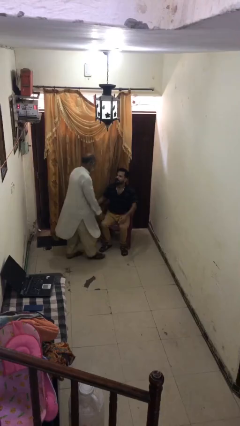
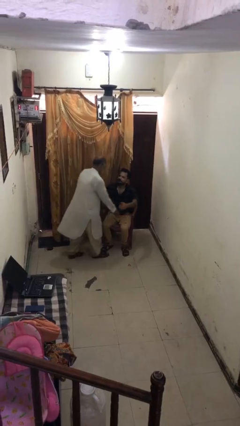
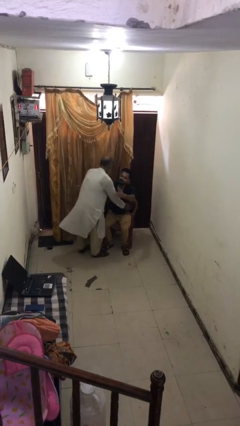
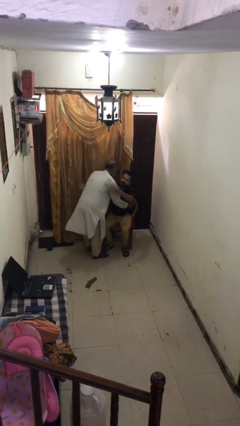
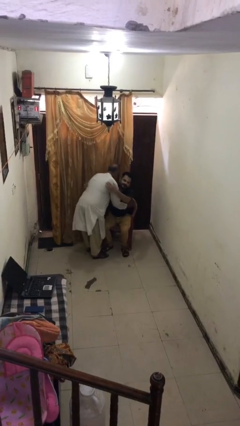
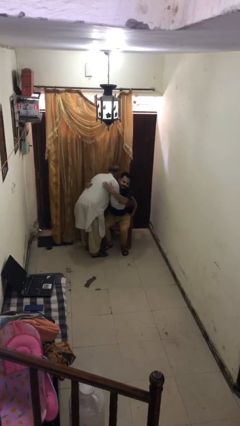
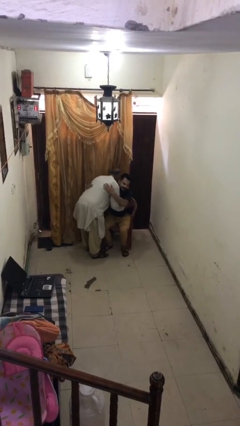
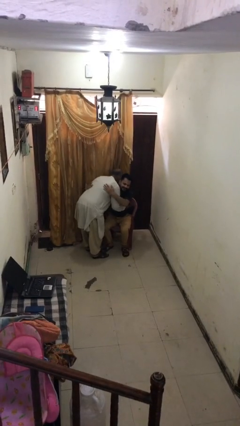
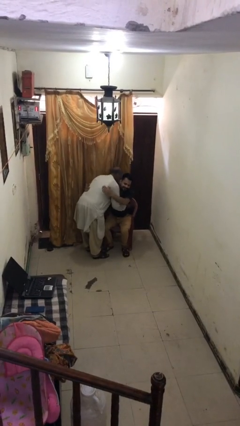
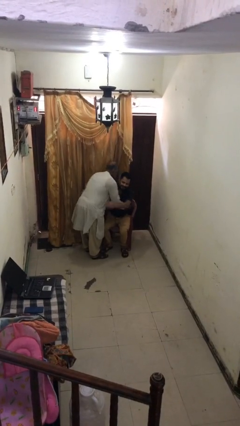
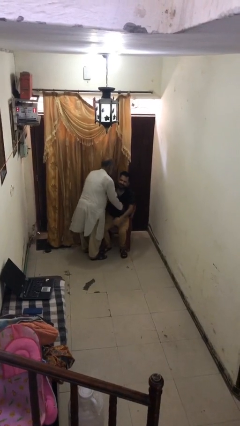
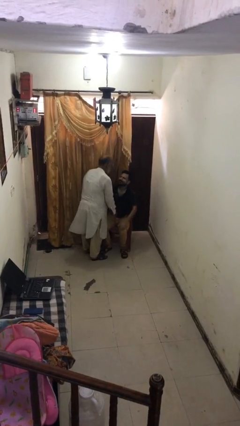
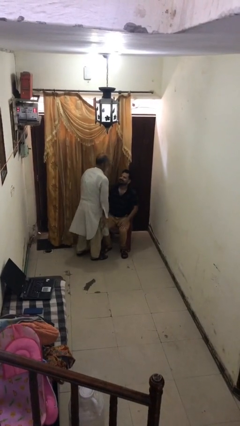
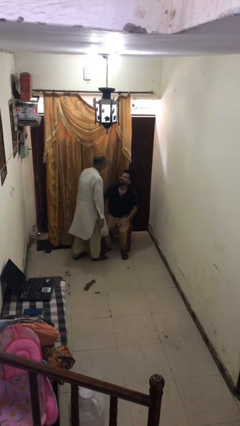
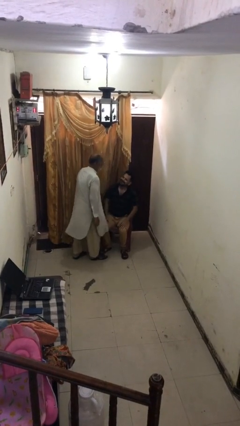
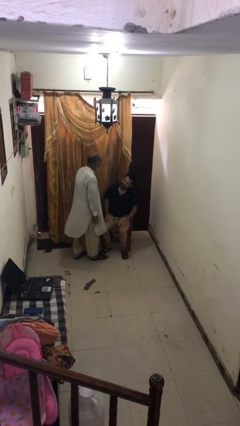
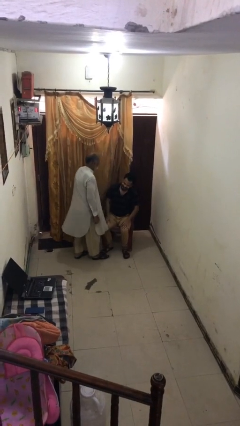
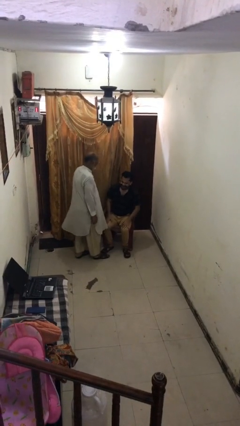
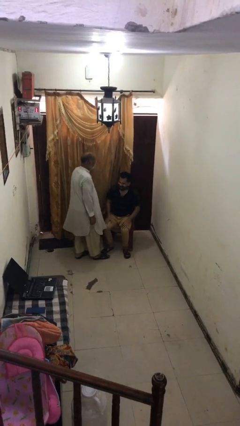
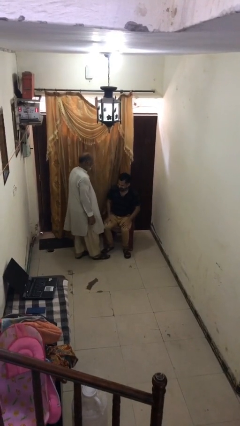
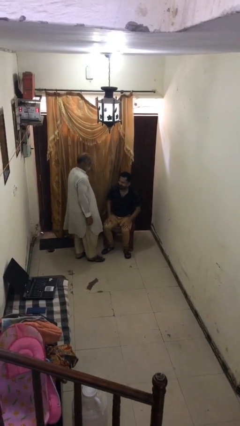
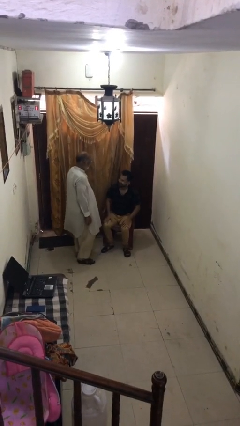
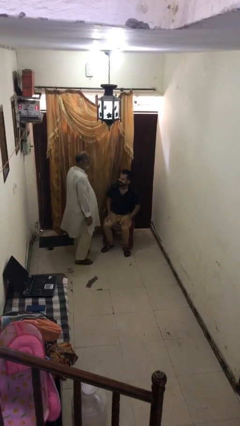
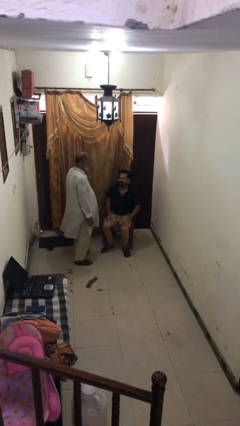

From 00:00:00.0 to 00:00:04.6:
person embraces person

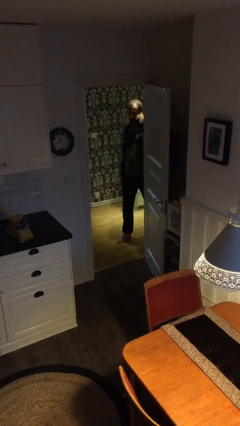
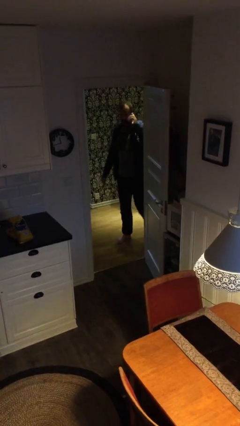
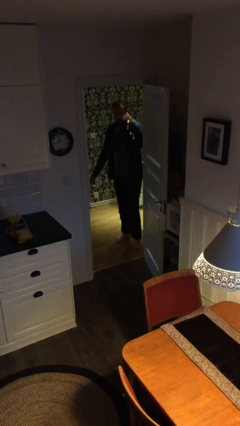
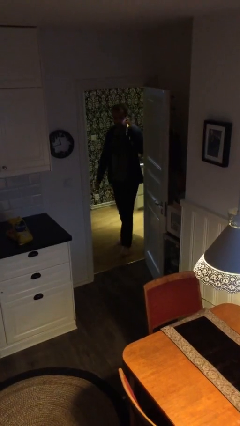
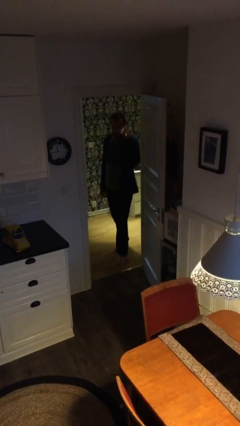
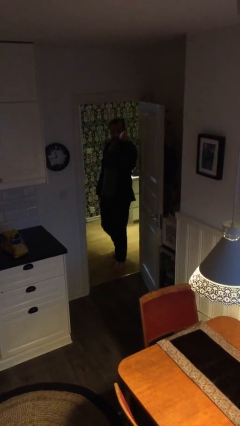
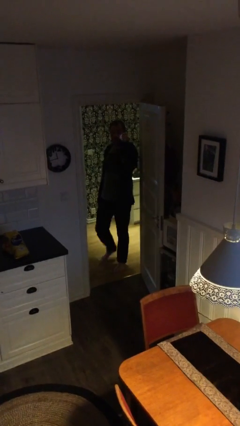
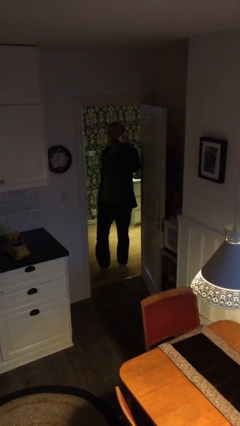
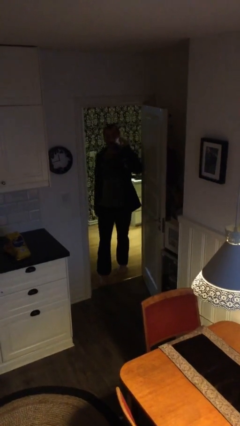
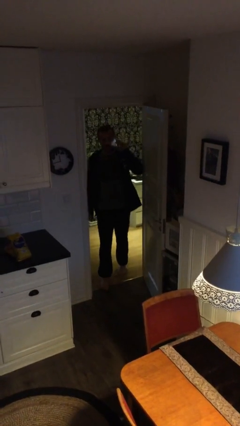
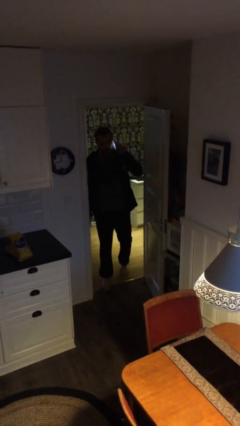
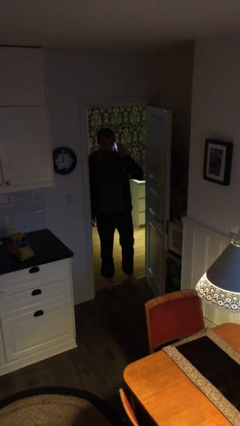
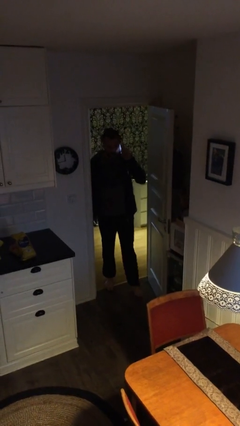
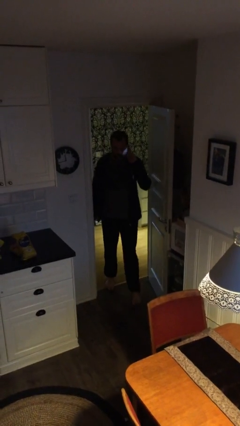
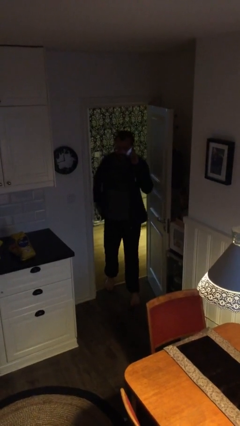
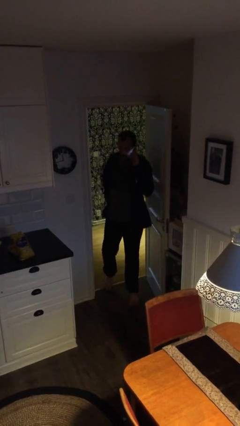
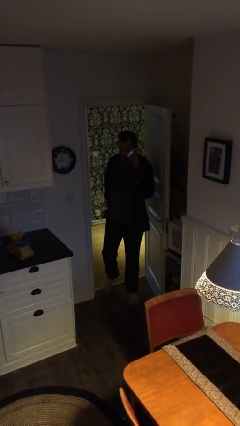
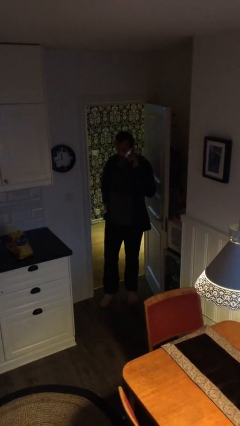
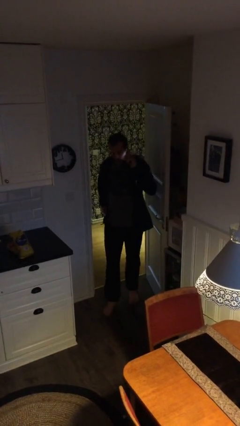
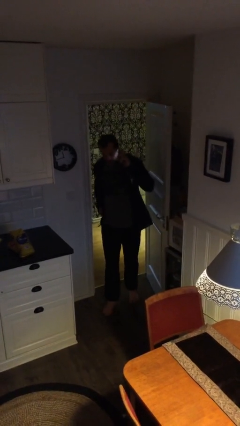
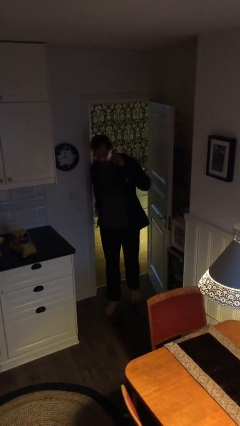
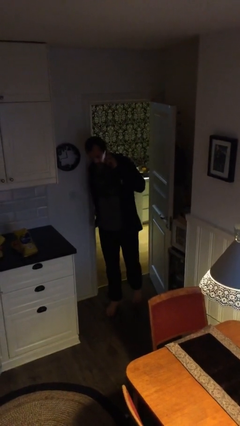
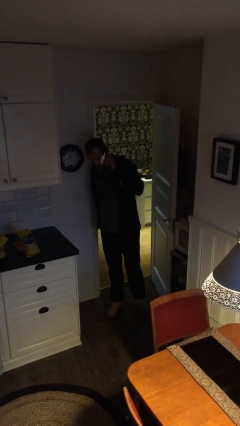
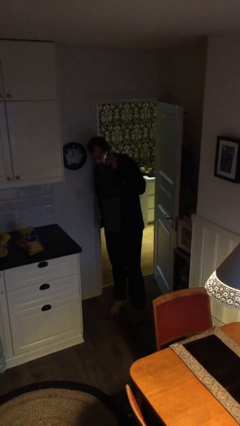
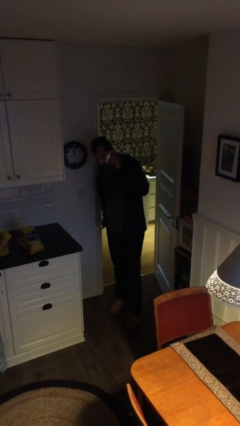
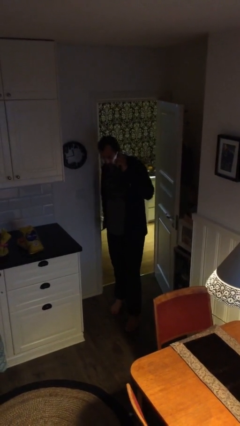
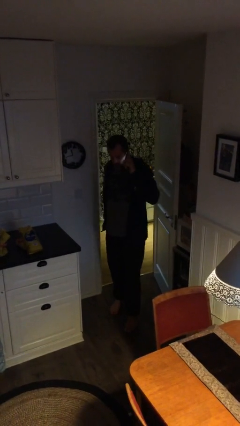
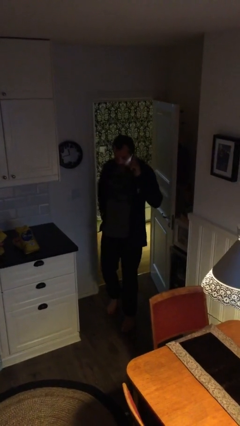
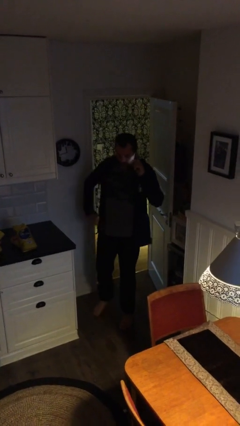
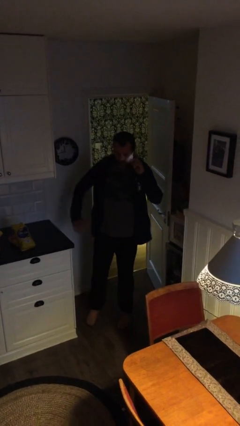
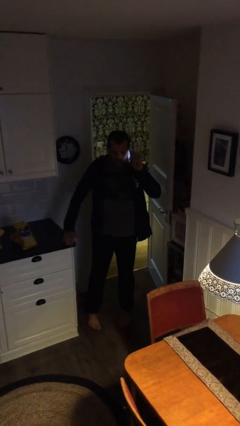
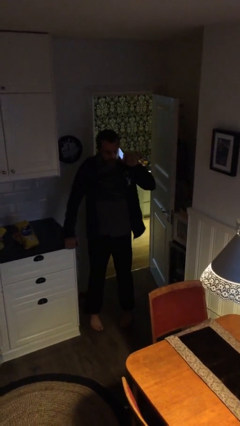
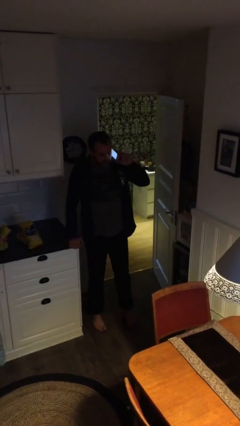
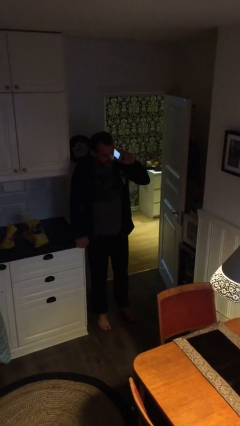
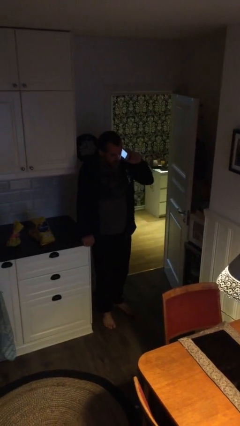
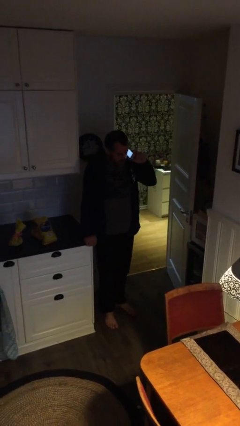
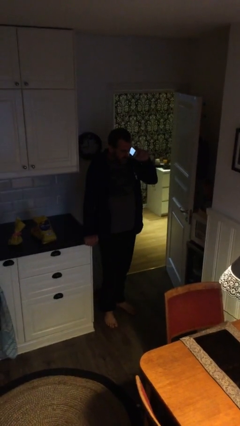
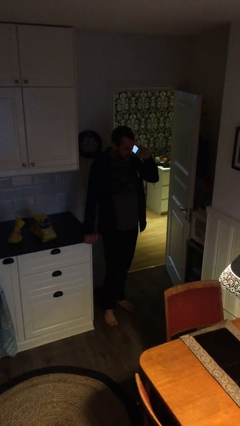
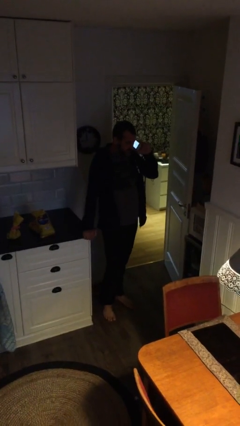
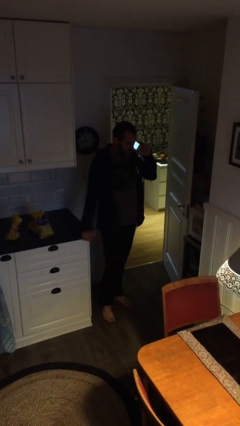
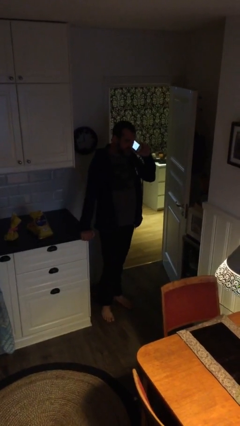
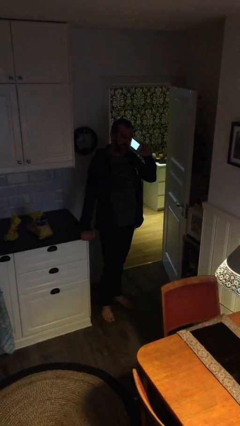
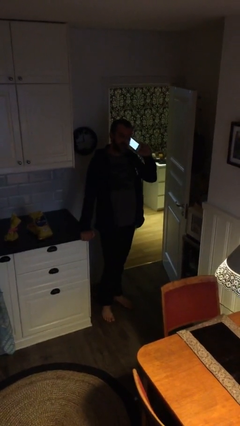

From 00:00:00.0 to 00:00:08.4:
person enters scene through structure

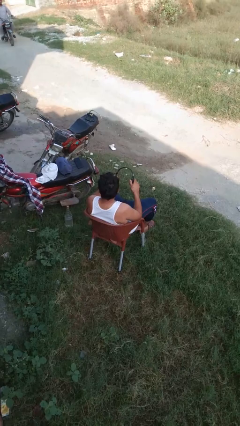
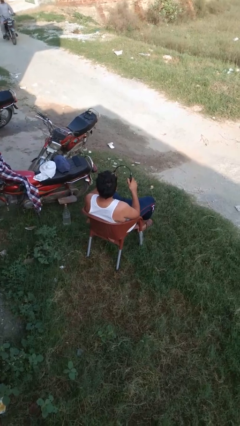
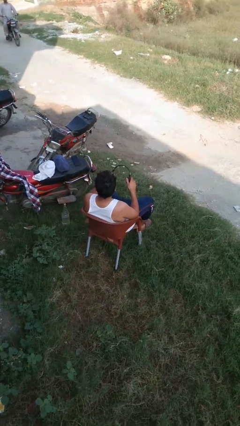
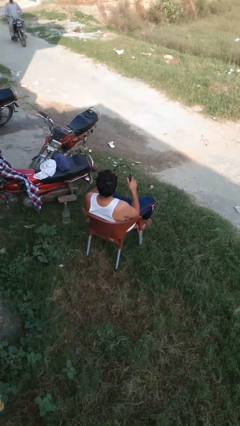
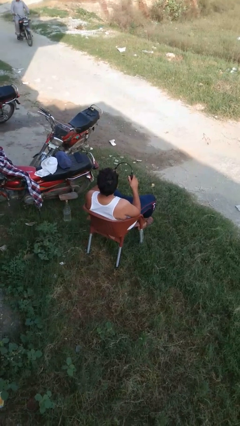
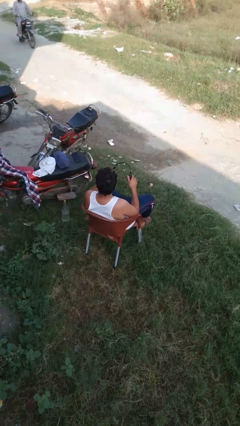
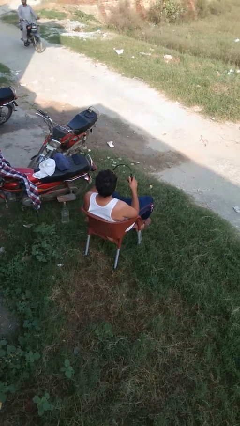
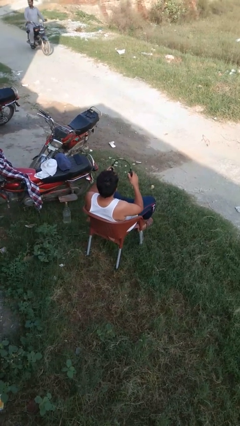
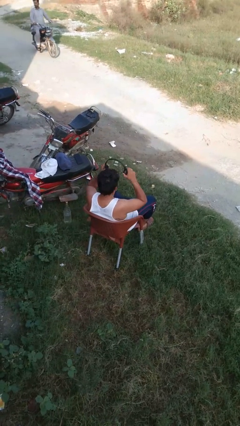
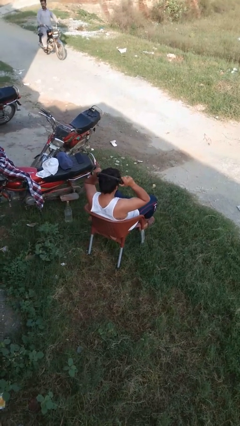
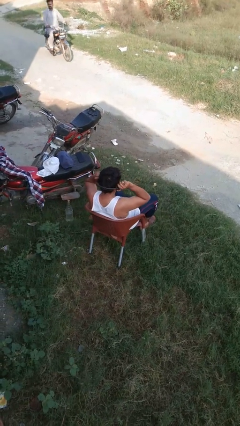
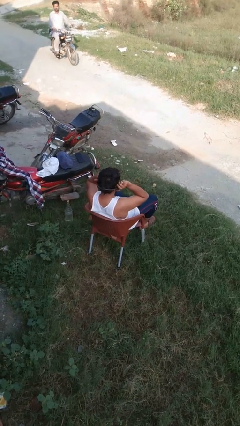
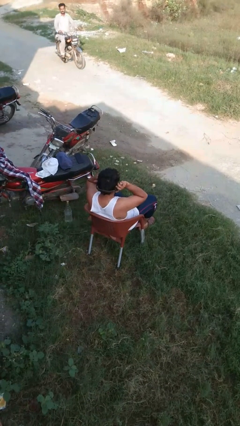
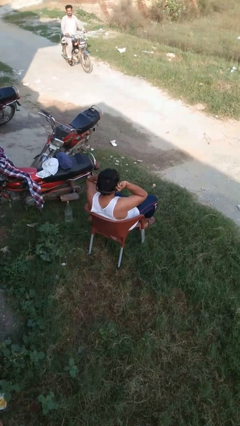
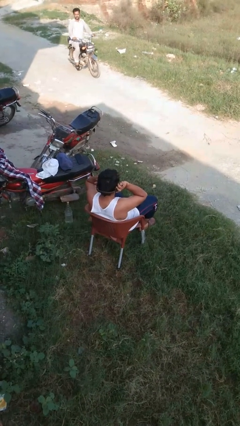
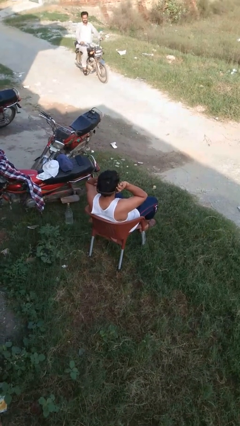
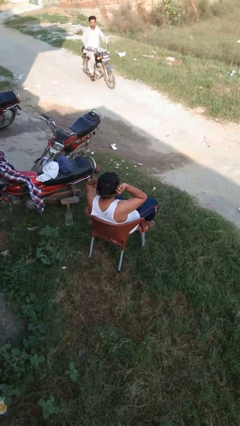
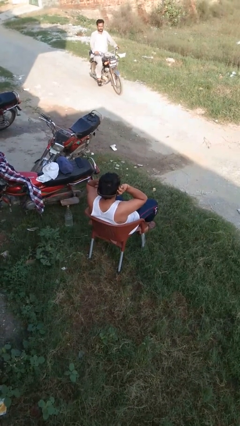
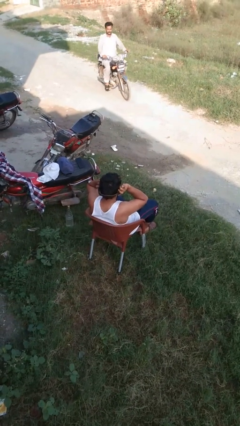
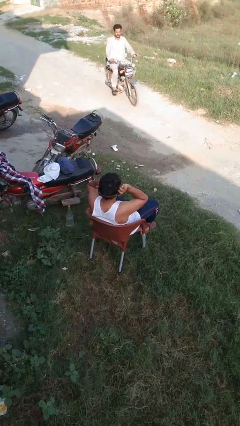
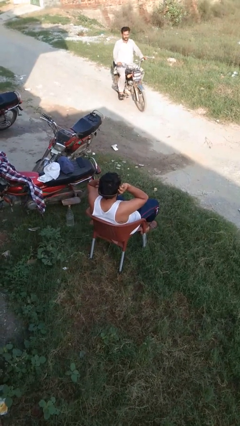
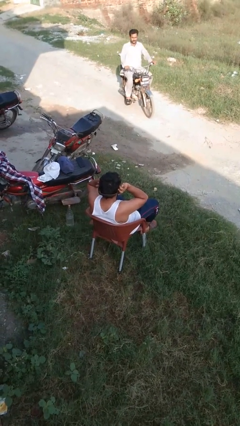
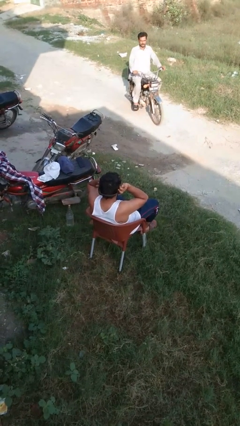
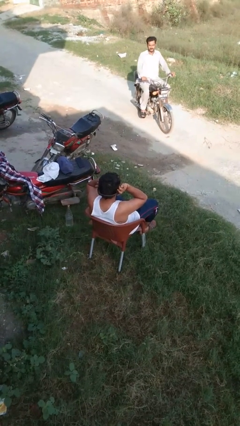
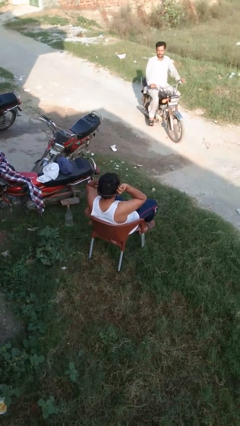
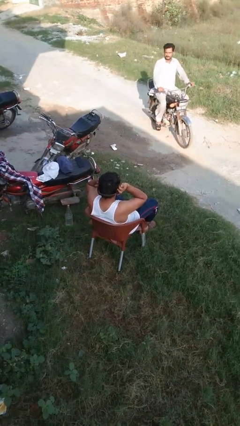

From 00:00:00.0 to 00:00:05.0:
person puts on headphones
